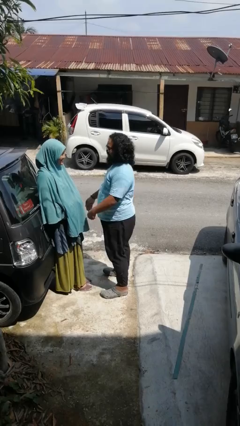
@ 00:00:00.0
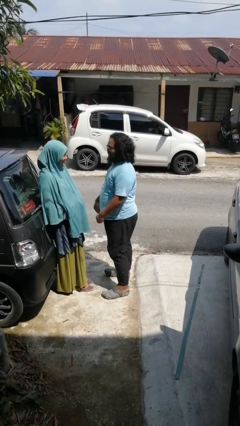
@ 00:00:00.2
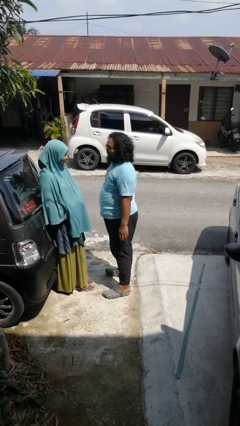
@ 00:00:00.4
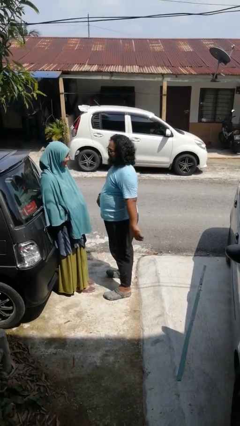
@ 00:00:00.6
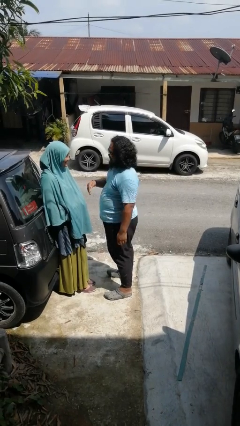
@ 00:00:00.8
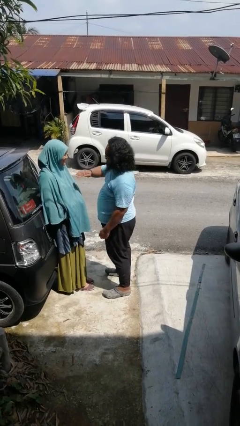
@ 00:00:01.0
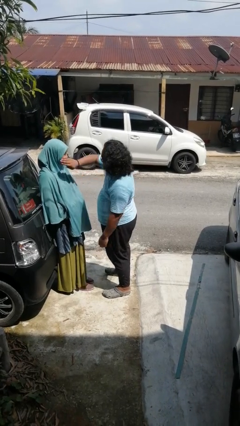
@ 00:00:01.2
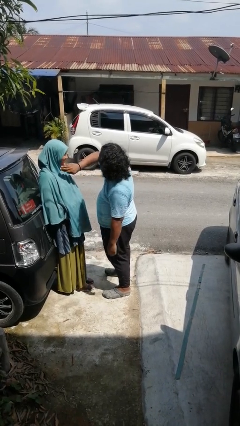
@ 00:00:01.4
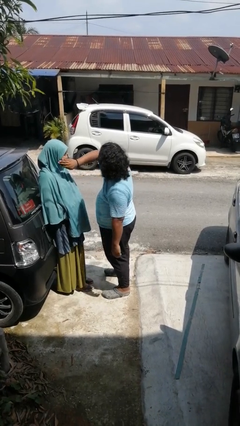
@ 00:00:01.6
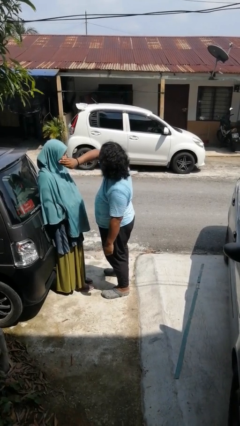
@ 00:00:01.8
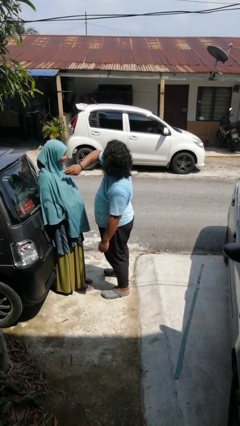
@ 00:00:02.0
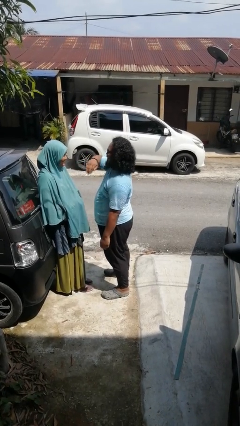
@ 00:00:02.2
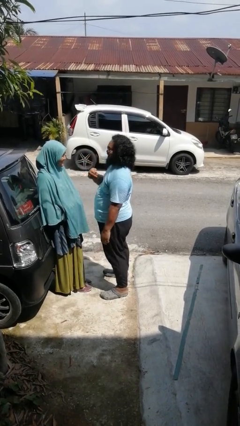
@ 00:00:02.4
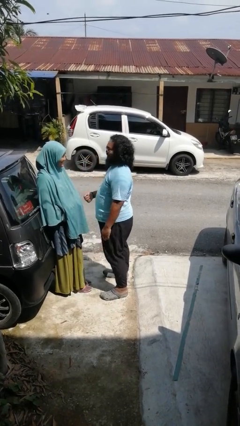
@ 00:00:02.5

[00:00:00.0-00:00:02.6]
person touches face of person

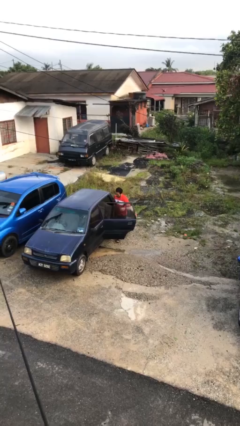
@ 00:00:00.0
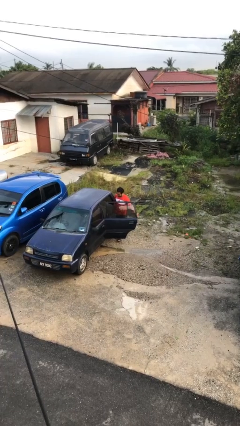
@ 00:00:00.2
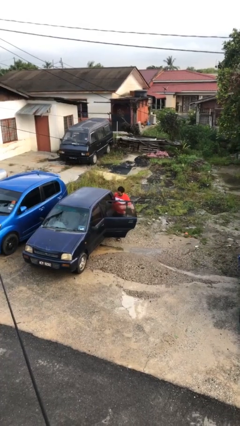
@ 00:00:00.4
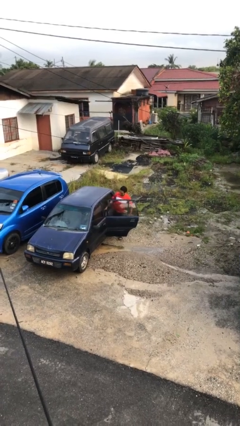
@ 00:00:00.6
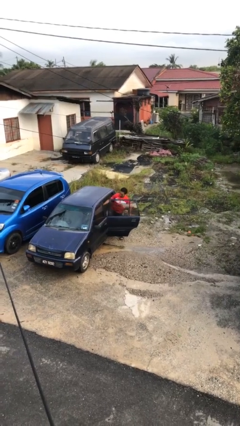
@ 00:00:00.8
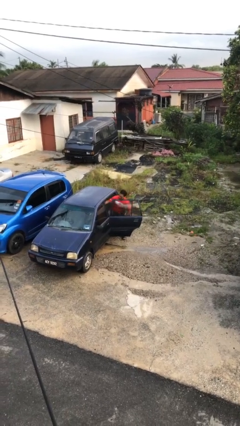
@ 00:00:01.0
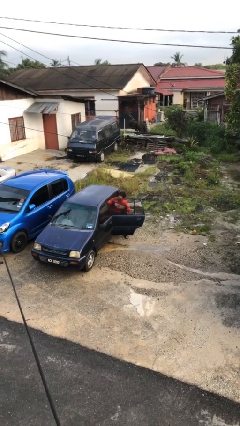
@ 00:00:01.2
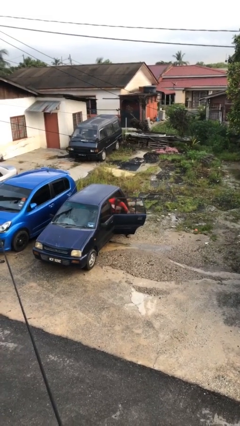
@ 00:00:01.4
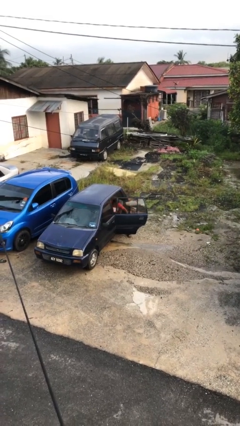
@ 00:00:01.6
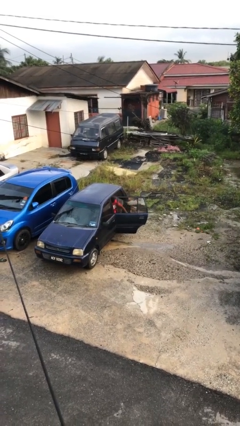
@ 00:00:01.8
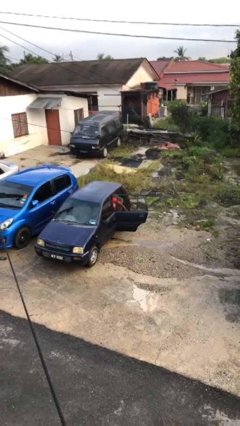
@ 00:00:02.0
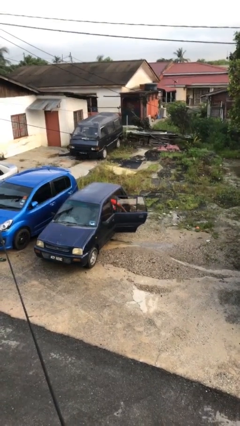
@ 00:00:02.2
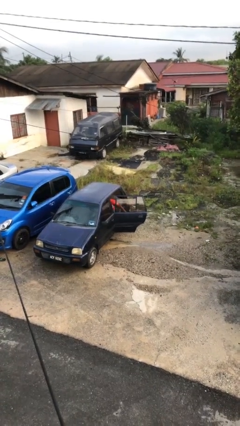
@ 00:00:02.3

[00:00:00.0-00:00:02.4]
person enters car

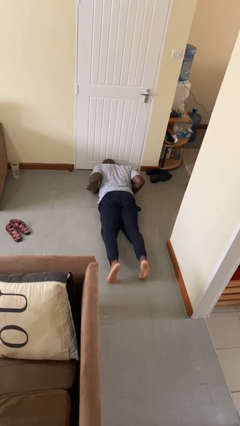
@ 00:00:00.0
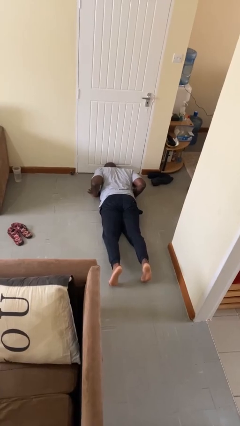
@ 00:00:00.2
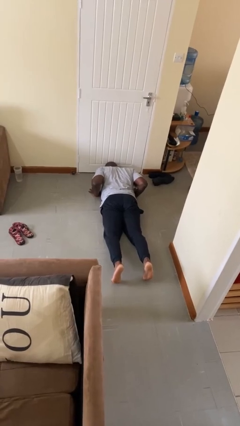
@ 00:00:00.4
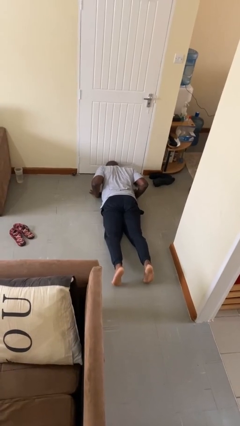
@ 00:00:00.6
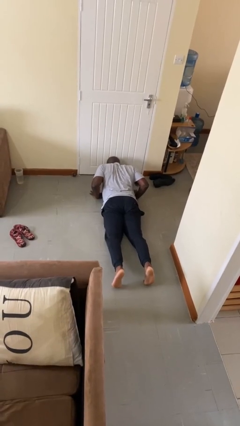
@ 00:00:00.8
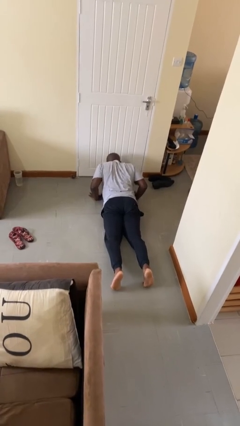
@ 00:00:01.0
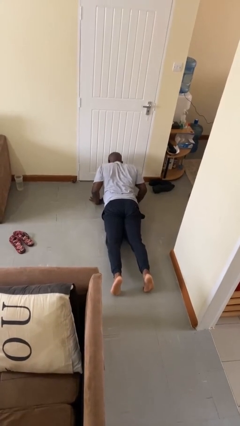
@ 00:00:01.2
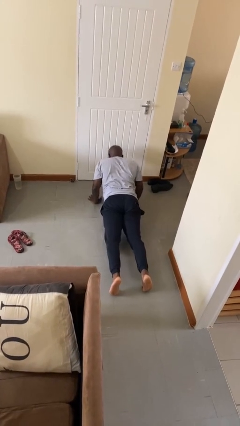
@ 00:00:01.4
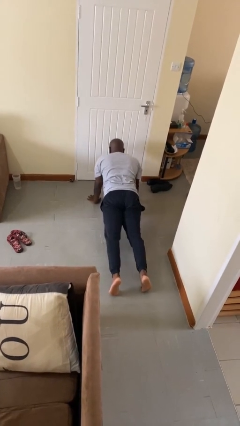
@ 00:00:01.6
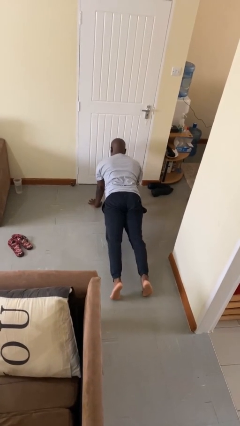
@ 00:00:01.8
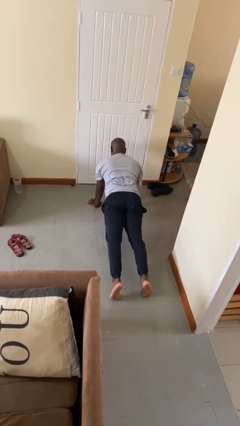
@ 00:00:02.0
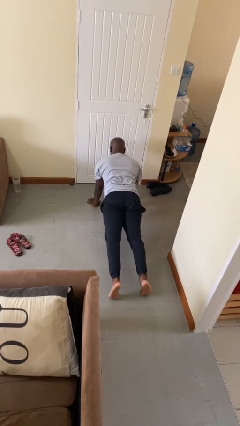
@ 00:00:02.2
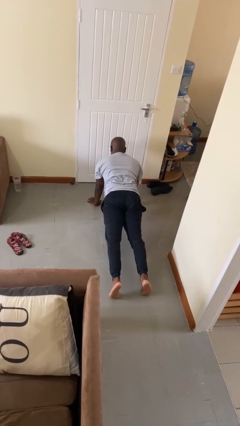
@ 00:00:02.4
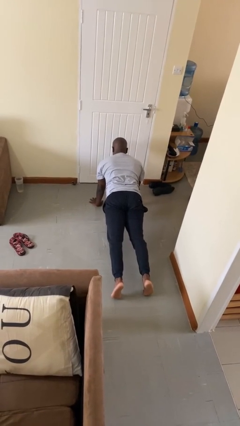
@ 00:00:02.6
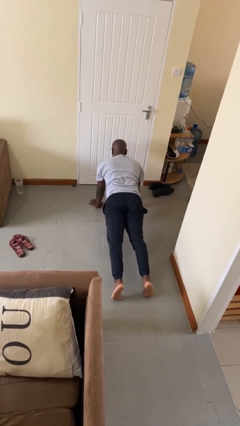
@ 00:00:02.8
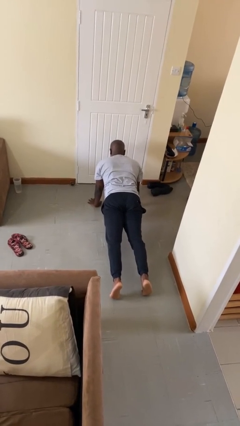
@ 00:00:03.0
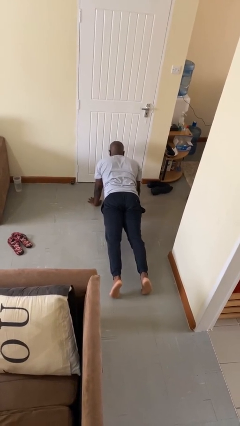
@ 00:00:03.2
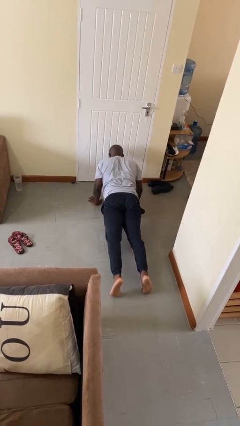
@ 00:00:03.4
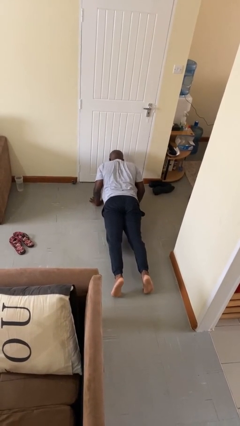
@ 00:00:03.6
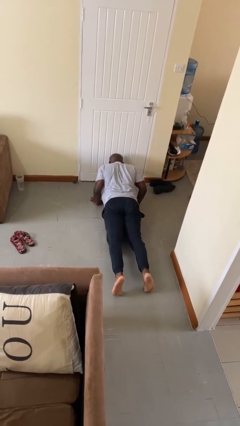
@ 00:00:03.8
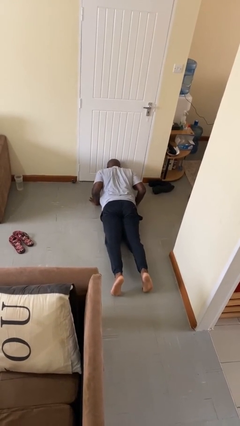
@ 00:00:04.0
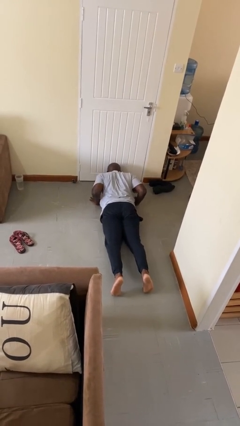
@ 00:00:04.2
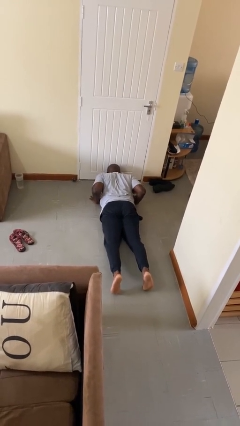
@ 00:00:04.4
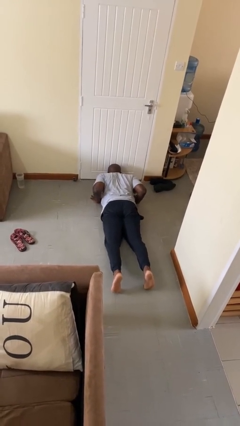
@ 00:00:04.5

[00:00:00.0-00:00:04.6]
person exercises with pushup

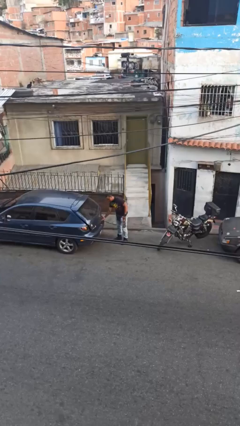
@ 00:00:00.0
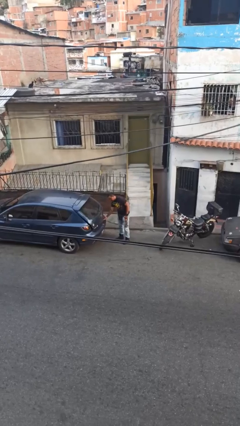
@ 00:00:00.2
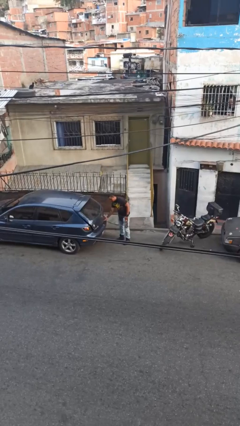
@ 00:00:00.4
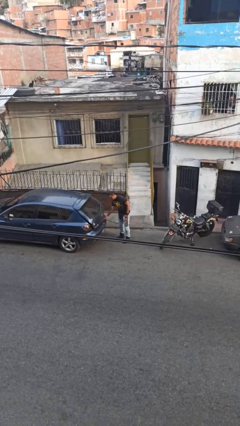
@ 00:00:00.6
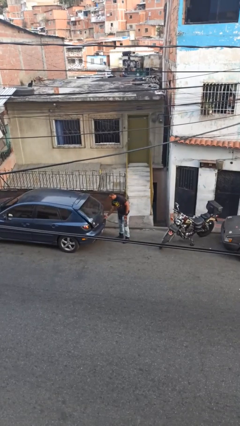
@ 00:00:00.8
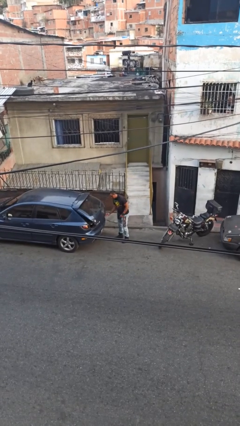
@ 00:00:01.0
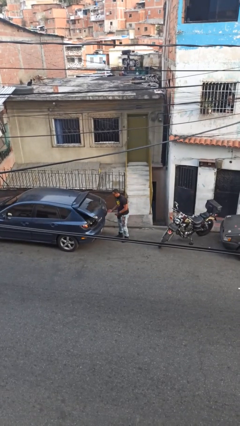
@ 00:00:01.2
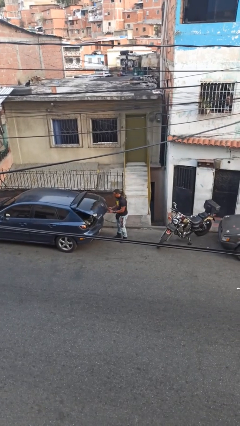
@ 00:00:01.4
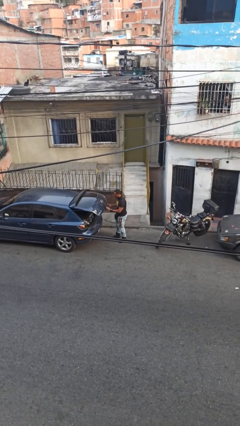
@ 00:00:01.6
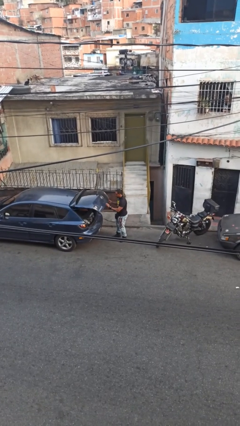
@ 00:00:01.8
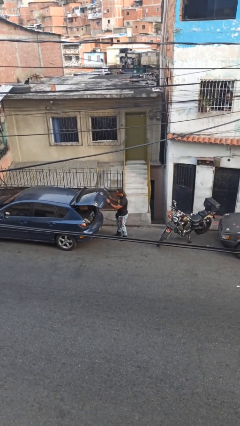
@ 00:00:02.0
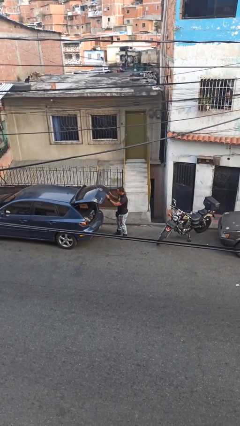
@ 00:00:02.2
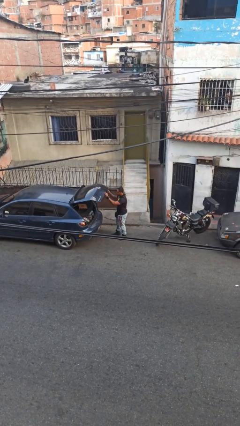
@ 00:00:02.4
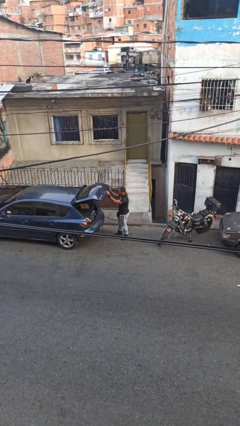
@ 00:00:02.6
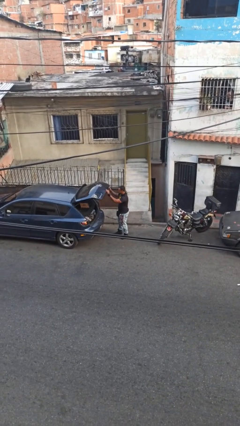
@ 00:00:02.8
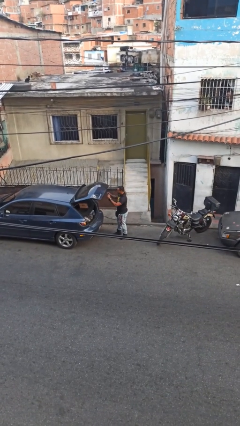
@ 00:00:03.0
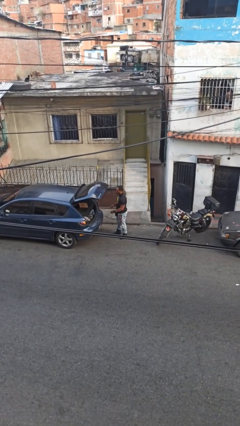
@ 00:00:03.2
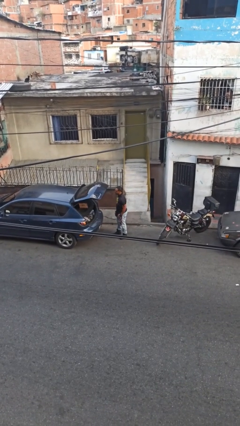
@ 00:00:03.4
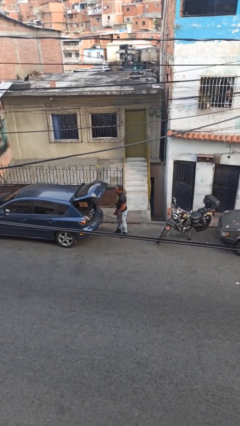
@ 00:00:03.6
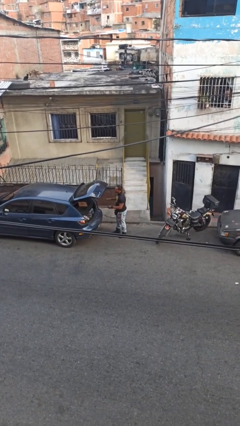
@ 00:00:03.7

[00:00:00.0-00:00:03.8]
person opens car trunk

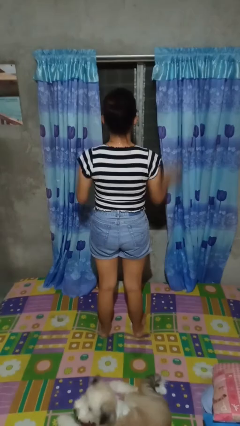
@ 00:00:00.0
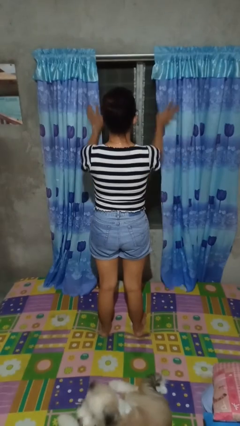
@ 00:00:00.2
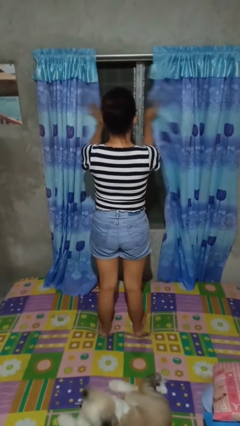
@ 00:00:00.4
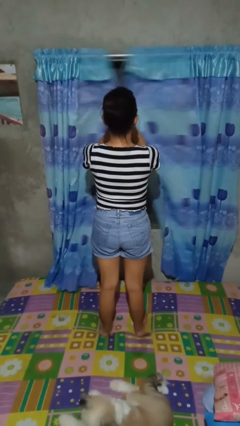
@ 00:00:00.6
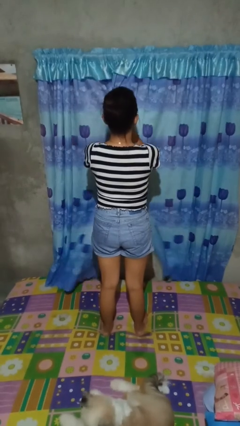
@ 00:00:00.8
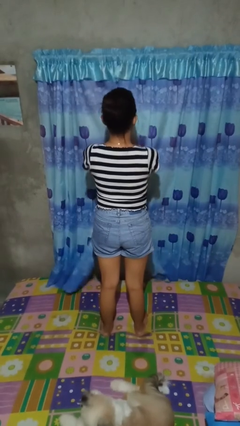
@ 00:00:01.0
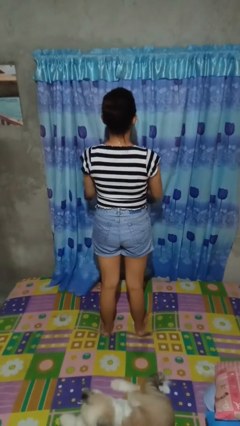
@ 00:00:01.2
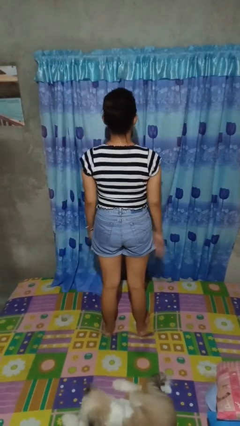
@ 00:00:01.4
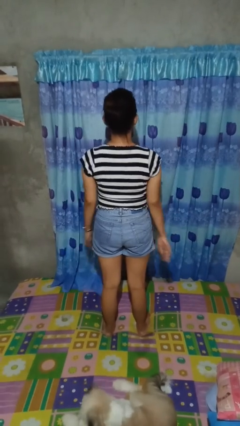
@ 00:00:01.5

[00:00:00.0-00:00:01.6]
person closes curtains

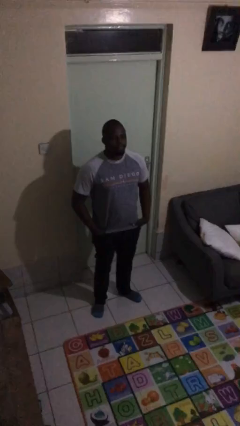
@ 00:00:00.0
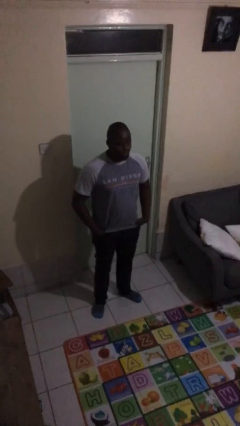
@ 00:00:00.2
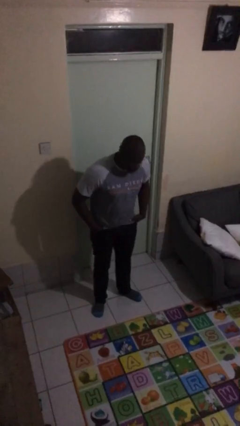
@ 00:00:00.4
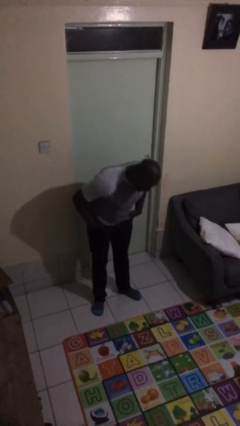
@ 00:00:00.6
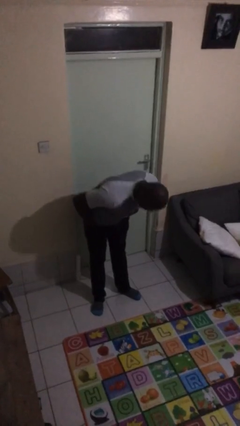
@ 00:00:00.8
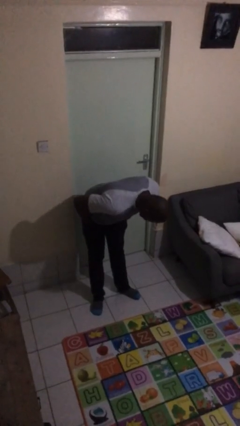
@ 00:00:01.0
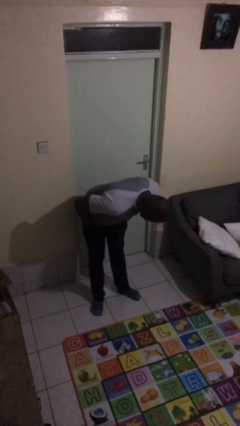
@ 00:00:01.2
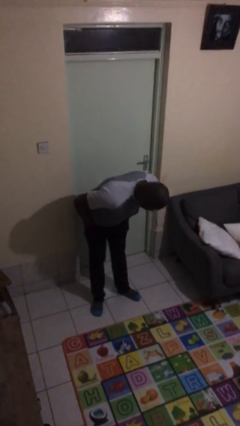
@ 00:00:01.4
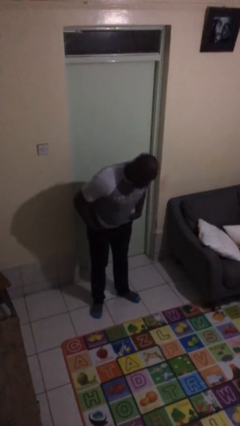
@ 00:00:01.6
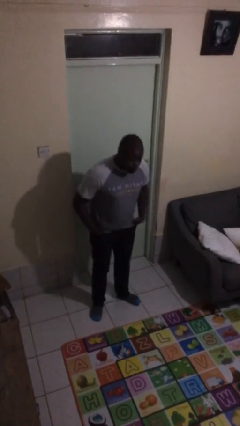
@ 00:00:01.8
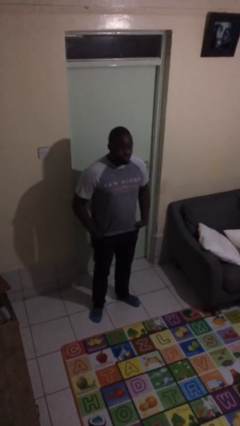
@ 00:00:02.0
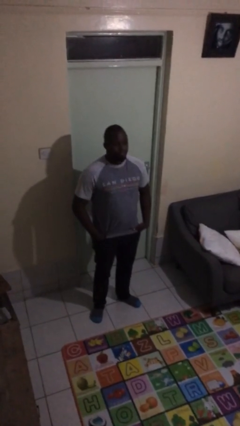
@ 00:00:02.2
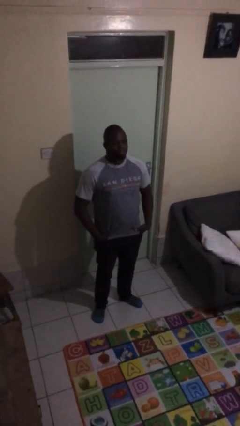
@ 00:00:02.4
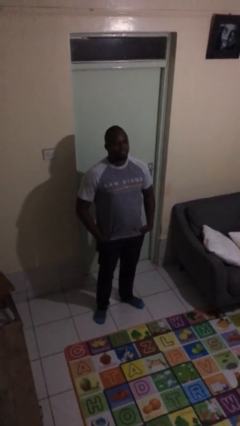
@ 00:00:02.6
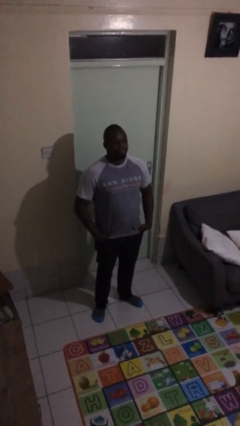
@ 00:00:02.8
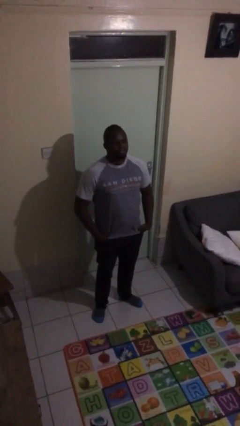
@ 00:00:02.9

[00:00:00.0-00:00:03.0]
person bows
